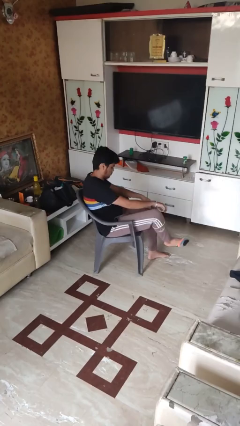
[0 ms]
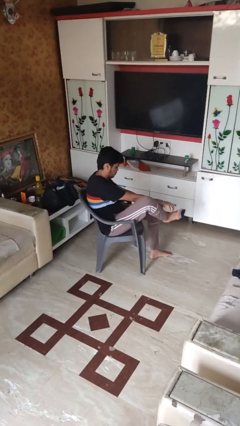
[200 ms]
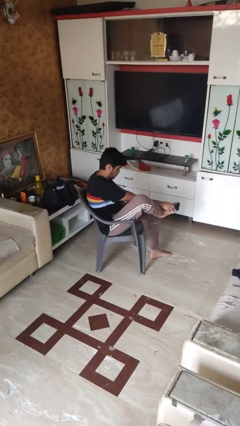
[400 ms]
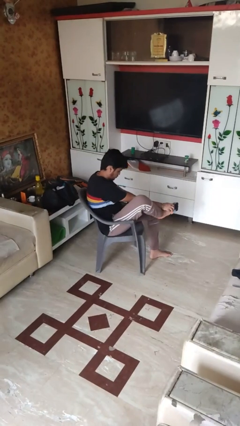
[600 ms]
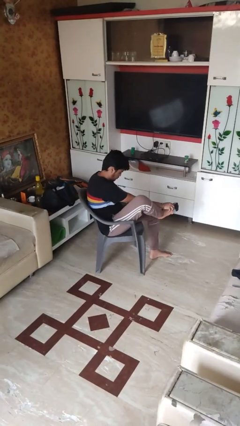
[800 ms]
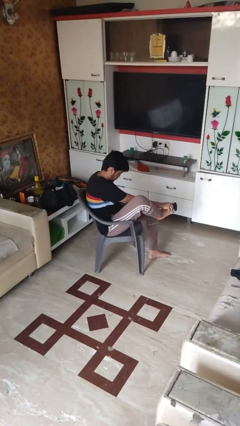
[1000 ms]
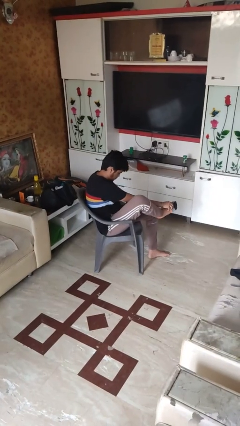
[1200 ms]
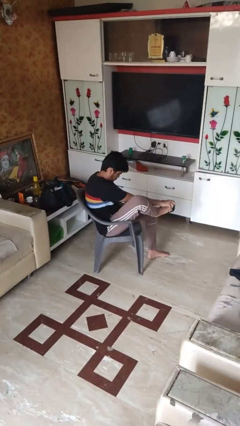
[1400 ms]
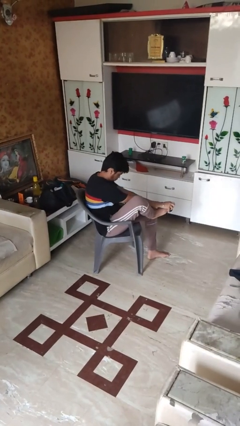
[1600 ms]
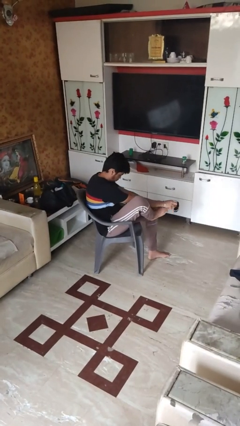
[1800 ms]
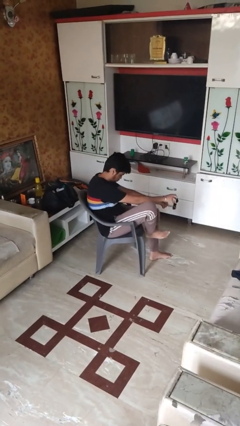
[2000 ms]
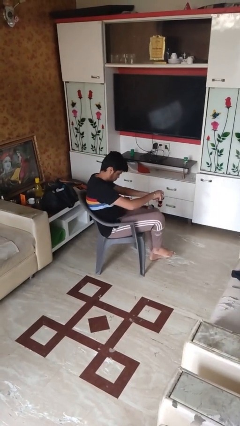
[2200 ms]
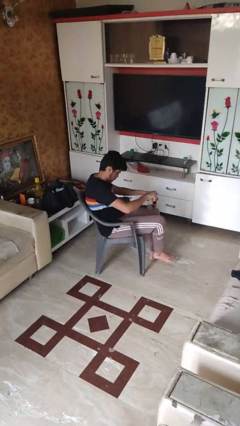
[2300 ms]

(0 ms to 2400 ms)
person takes off socks

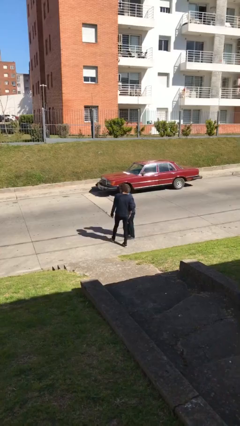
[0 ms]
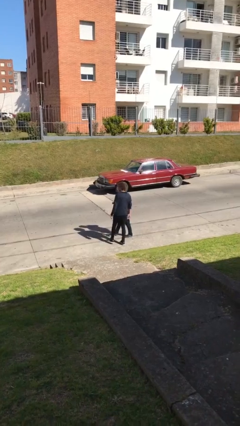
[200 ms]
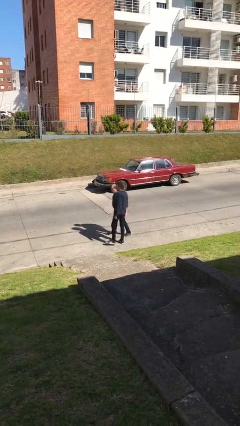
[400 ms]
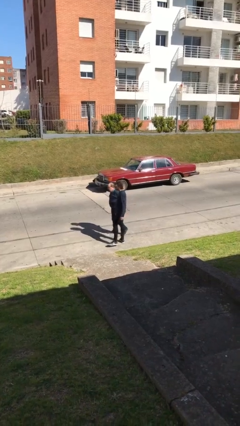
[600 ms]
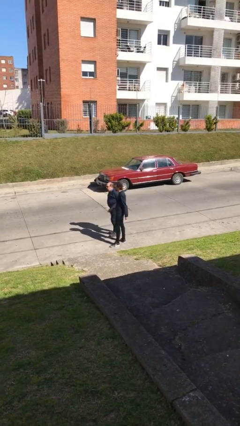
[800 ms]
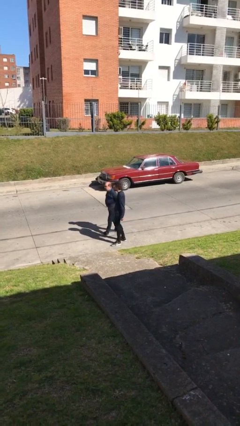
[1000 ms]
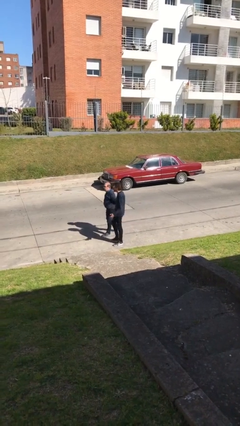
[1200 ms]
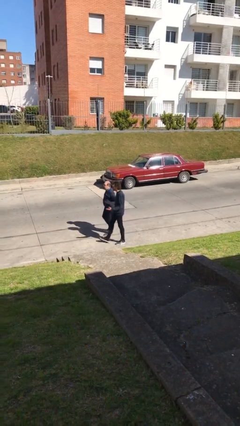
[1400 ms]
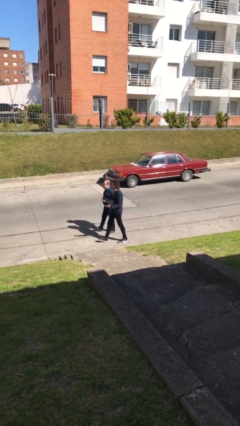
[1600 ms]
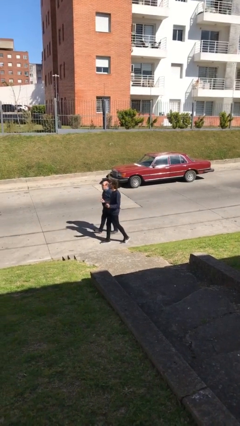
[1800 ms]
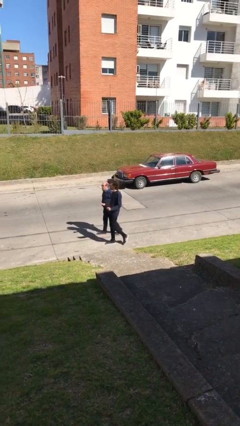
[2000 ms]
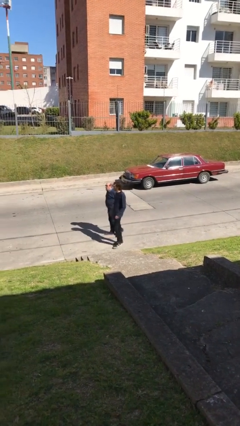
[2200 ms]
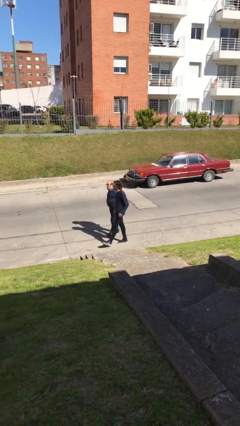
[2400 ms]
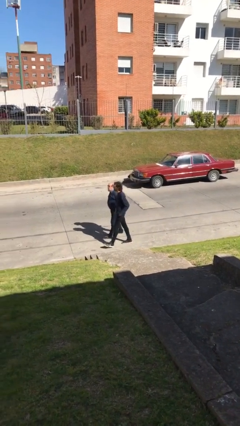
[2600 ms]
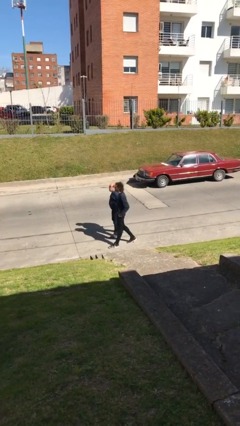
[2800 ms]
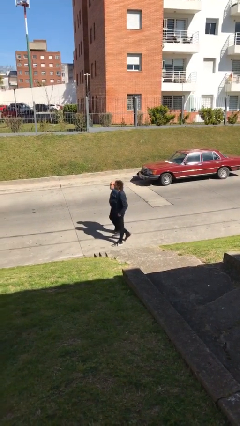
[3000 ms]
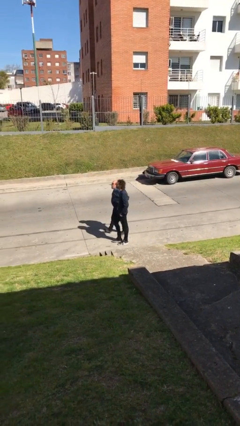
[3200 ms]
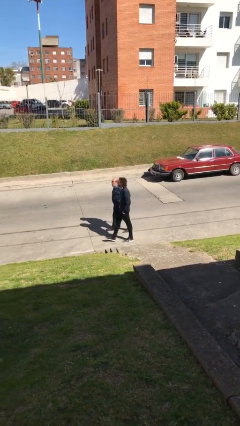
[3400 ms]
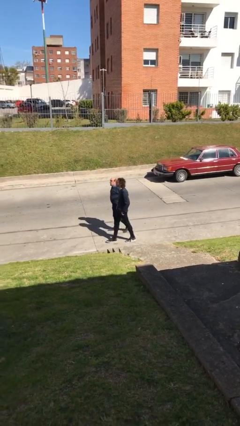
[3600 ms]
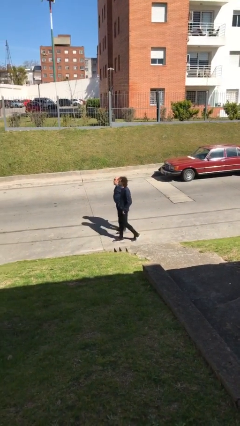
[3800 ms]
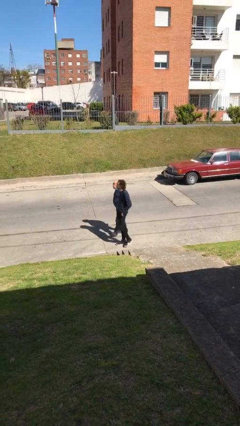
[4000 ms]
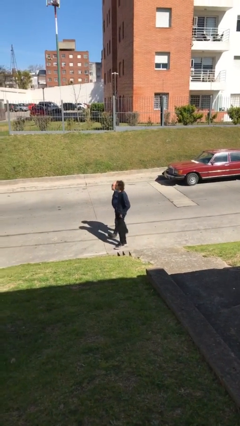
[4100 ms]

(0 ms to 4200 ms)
person talks to person

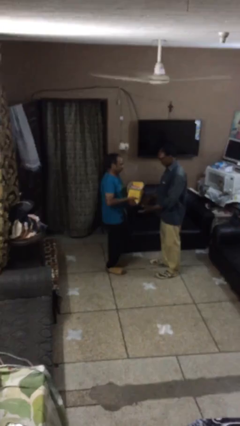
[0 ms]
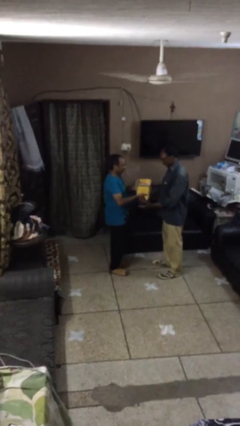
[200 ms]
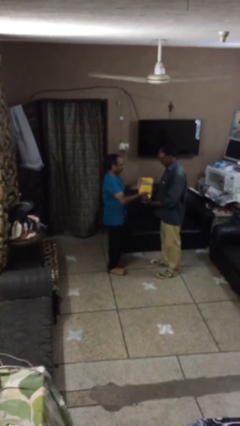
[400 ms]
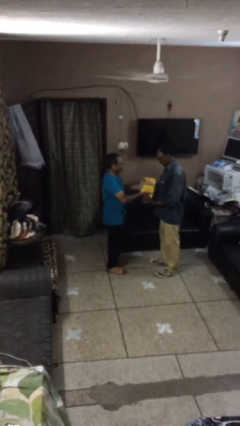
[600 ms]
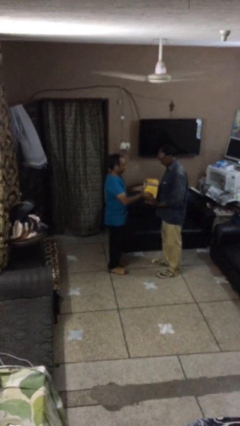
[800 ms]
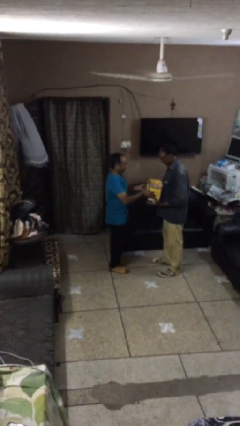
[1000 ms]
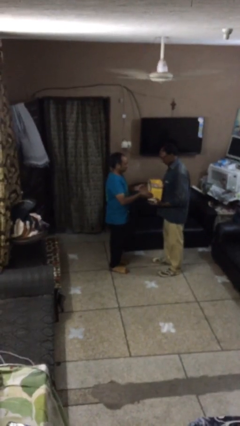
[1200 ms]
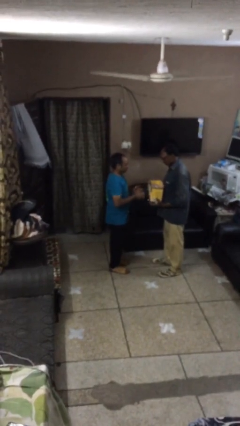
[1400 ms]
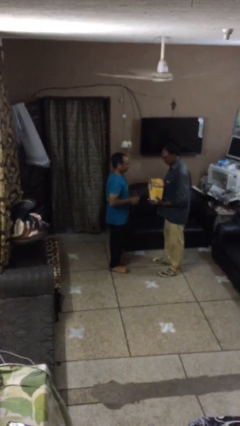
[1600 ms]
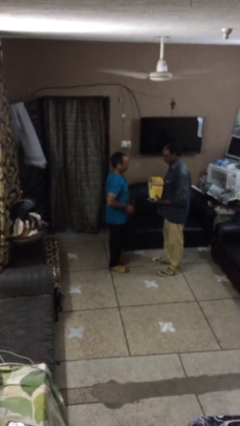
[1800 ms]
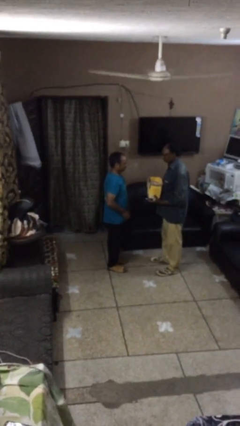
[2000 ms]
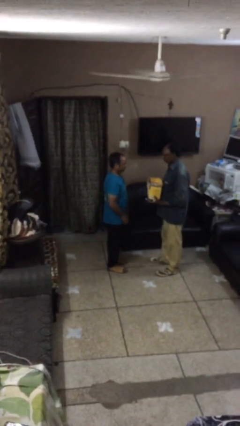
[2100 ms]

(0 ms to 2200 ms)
person transfers object to person

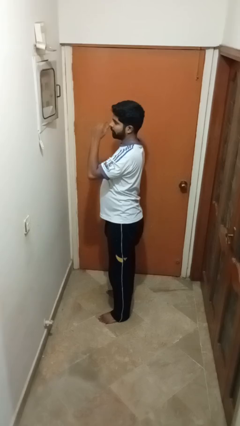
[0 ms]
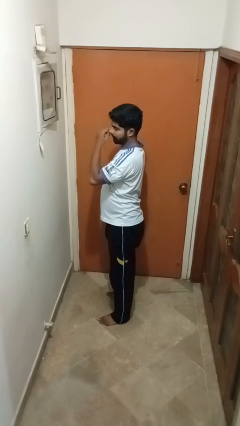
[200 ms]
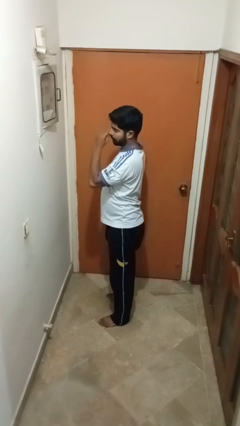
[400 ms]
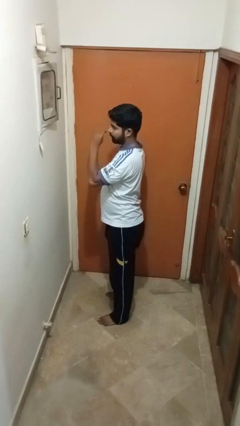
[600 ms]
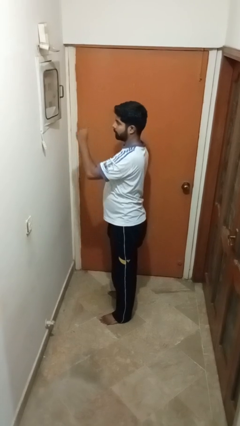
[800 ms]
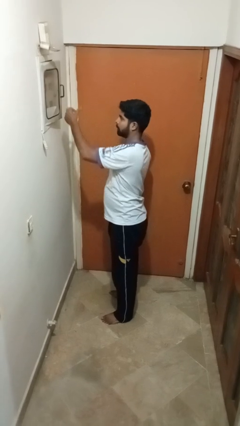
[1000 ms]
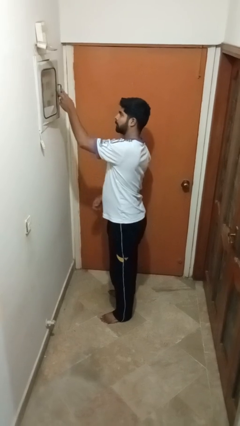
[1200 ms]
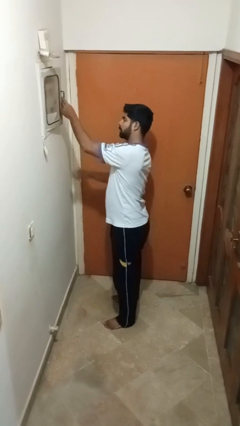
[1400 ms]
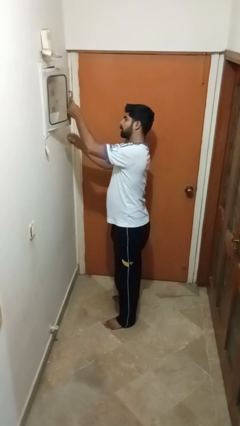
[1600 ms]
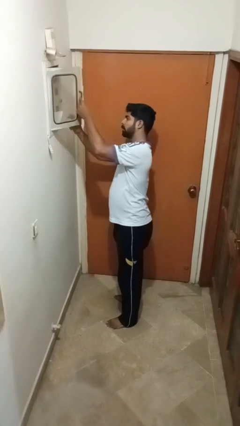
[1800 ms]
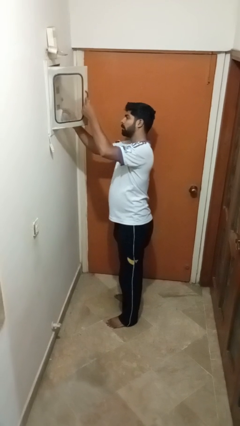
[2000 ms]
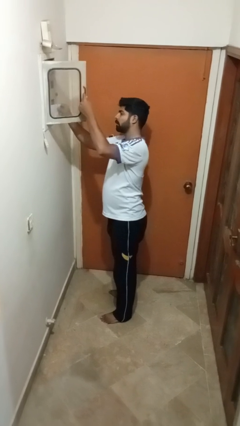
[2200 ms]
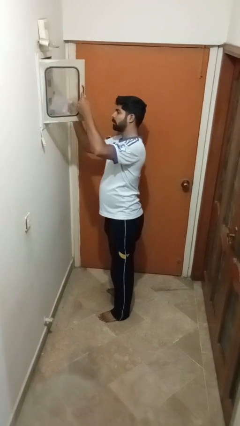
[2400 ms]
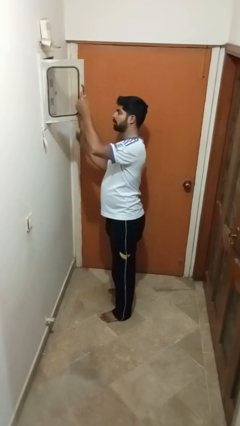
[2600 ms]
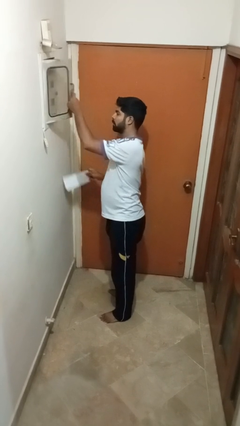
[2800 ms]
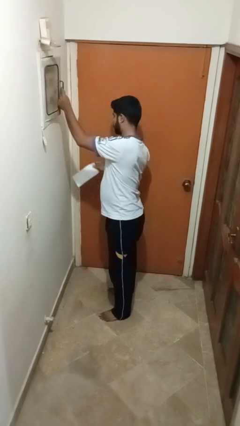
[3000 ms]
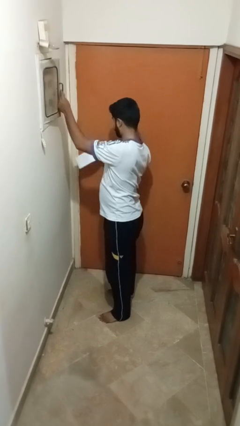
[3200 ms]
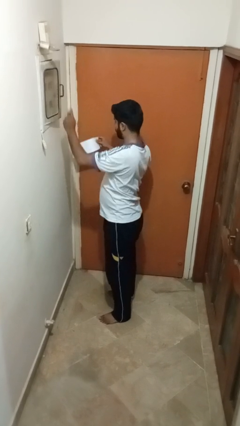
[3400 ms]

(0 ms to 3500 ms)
person takes letters from mailbox

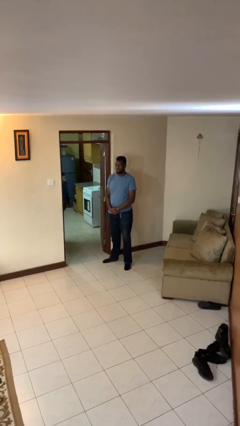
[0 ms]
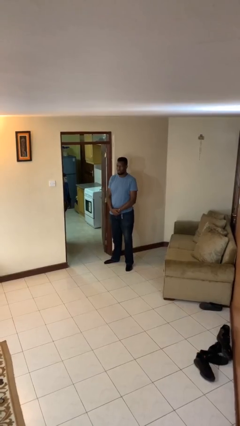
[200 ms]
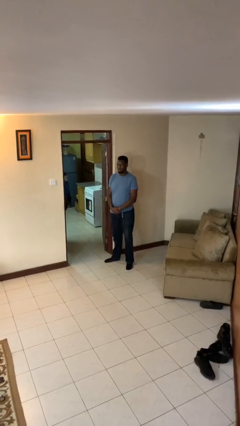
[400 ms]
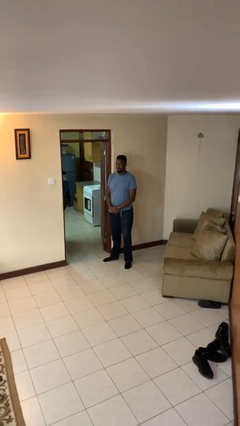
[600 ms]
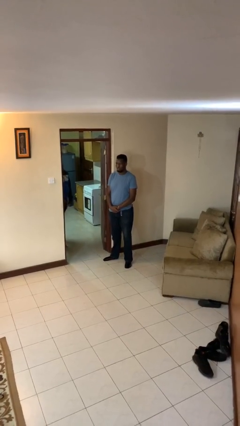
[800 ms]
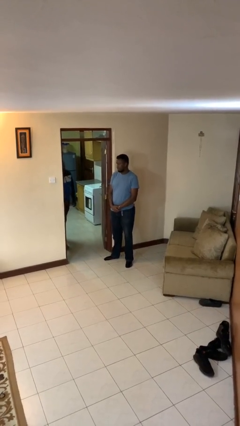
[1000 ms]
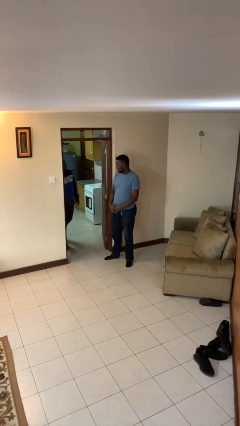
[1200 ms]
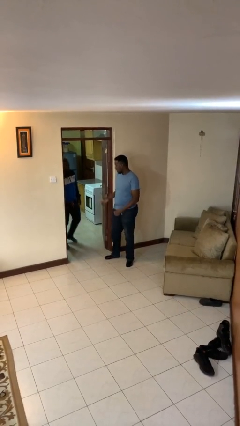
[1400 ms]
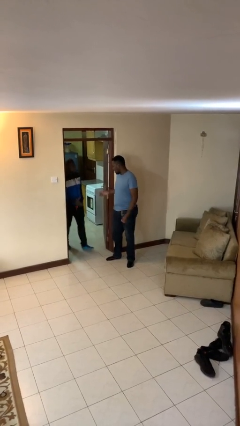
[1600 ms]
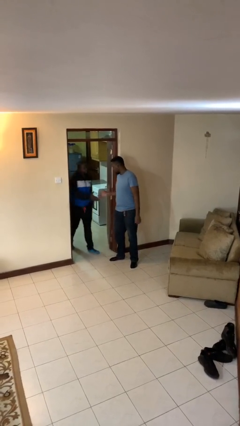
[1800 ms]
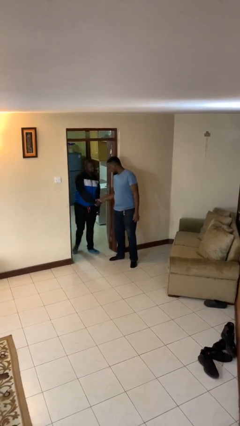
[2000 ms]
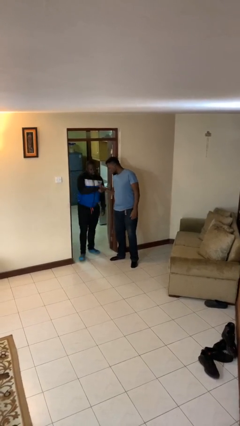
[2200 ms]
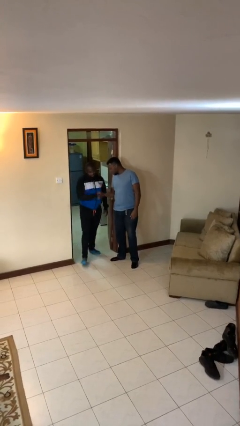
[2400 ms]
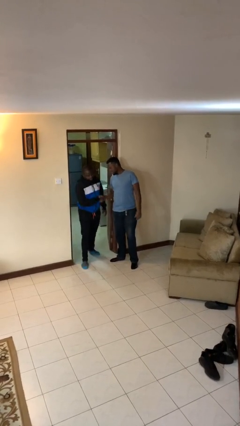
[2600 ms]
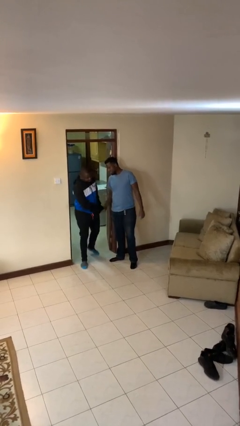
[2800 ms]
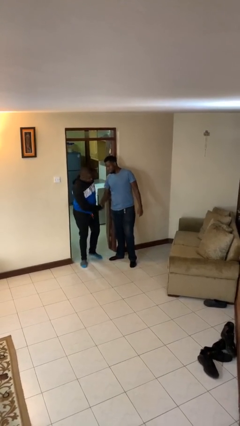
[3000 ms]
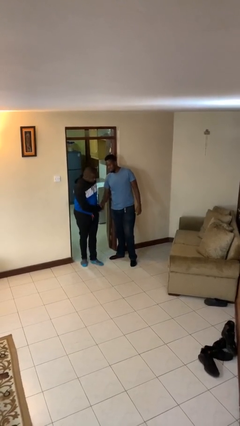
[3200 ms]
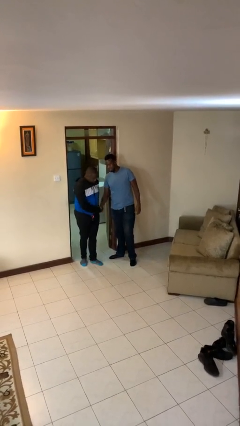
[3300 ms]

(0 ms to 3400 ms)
person shakes hand

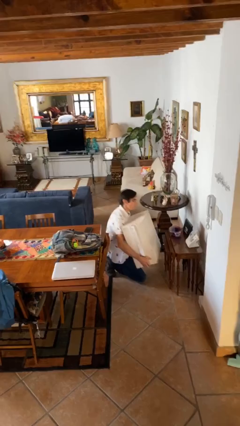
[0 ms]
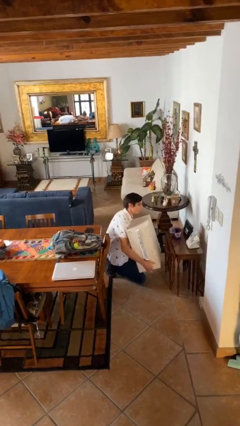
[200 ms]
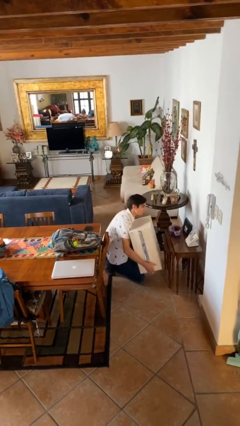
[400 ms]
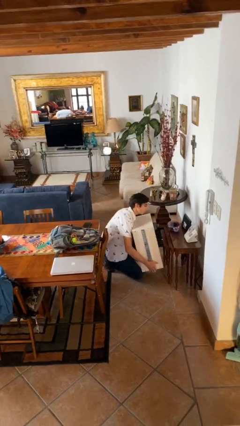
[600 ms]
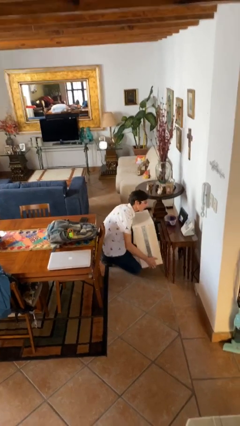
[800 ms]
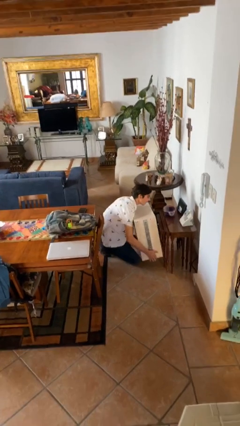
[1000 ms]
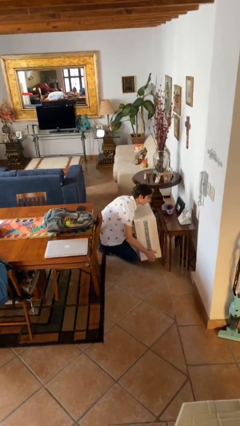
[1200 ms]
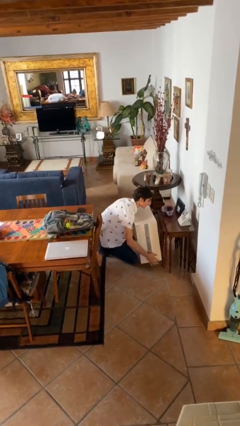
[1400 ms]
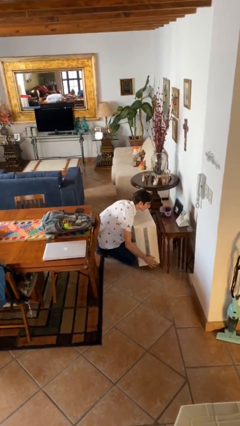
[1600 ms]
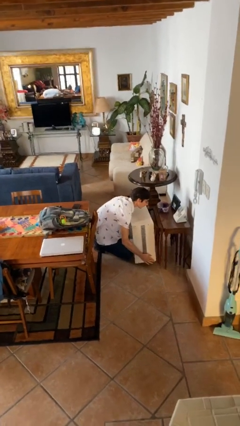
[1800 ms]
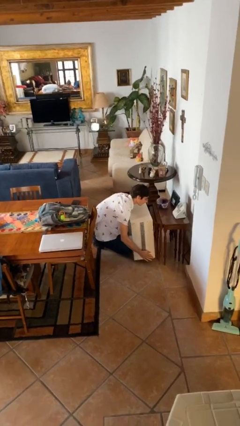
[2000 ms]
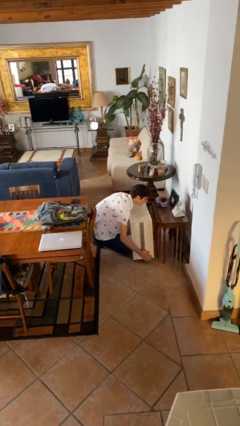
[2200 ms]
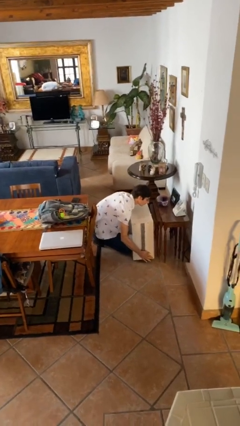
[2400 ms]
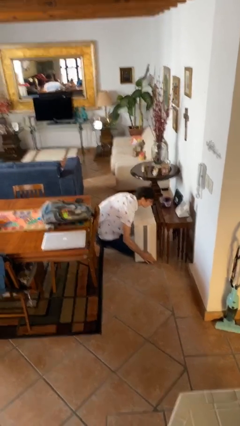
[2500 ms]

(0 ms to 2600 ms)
person puts down object on floor
